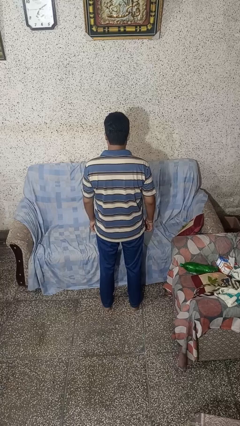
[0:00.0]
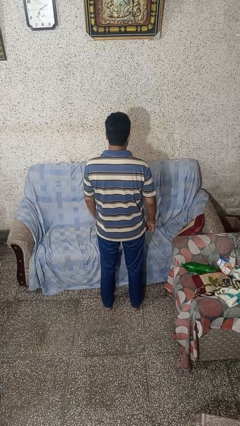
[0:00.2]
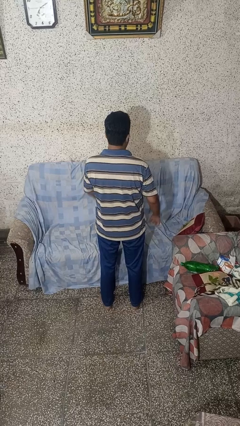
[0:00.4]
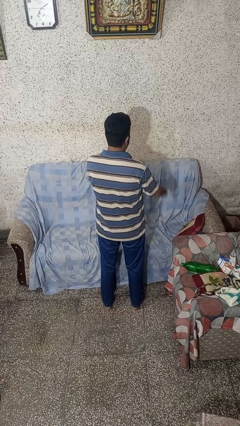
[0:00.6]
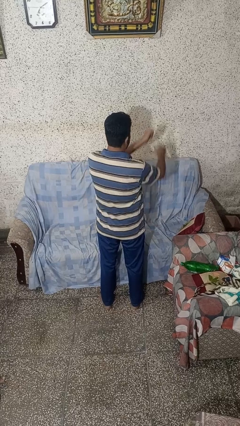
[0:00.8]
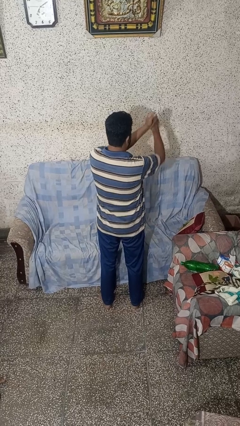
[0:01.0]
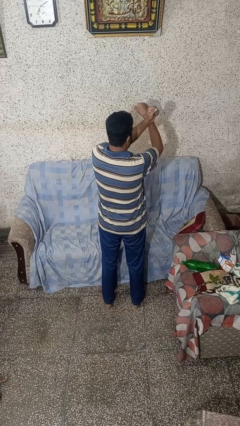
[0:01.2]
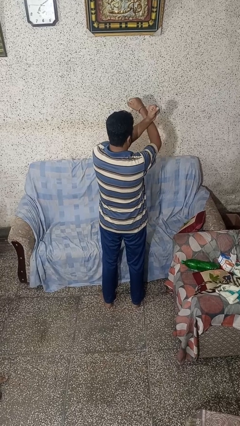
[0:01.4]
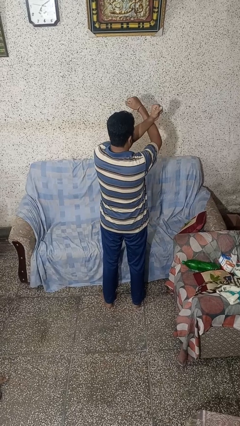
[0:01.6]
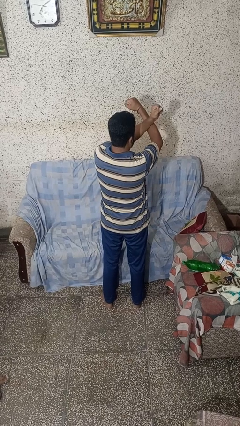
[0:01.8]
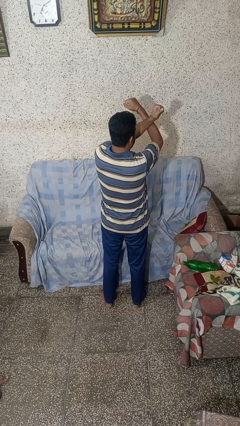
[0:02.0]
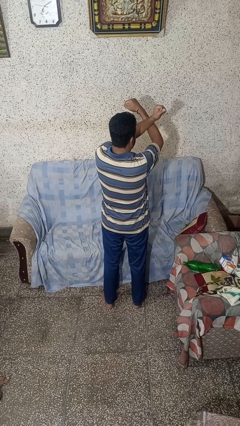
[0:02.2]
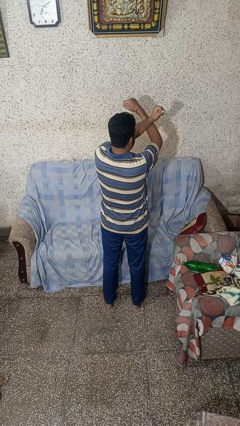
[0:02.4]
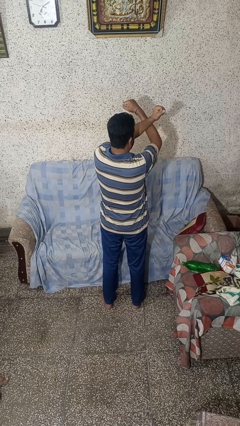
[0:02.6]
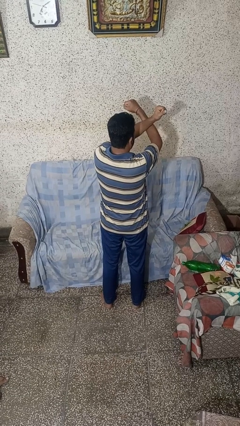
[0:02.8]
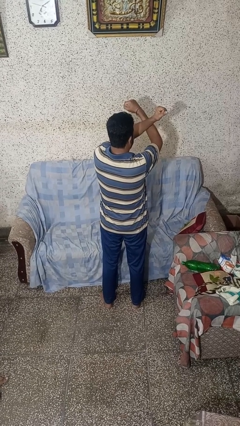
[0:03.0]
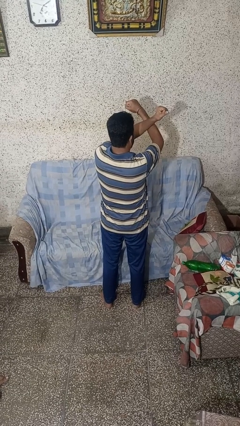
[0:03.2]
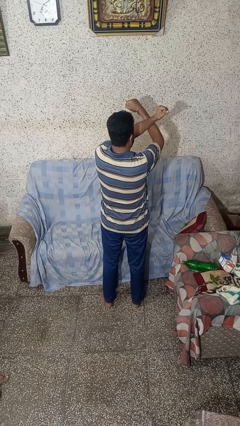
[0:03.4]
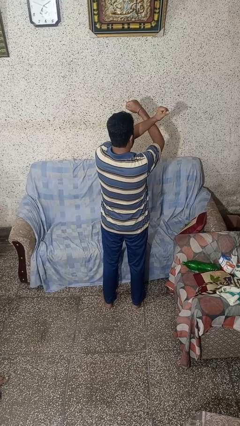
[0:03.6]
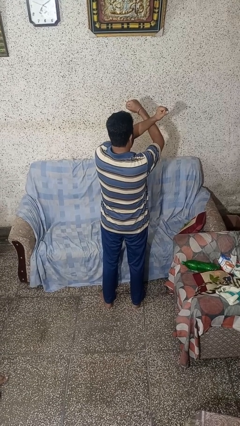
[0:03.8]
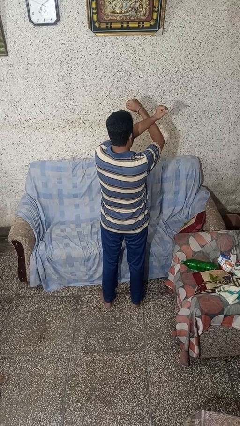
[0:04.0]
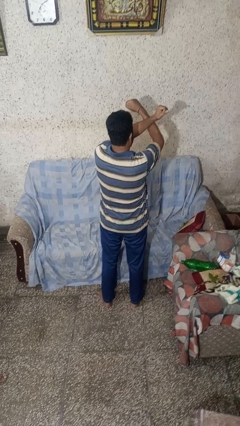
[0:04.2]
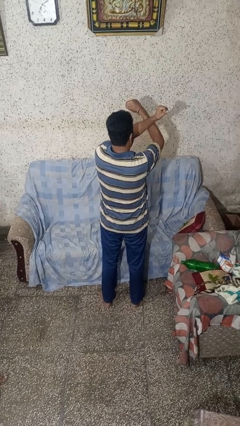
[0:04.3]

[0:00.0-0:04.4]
person gestures arms x

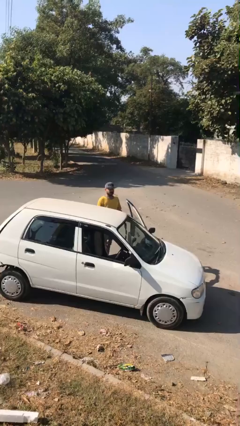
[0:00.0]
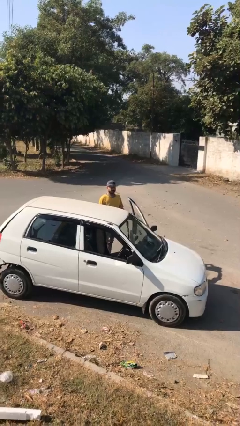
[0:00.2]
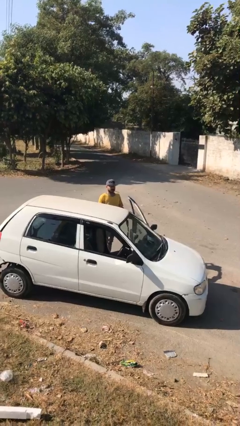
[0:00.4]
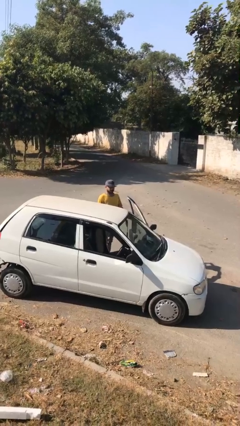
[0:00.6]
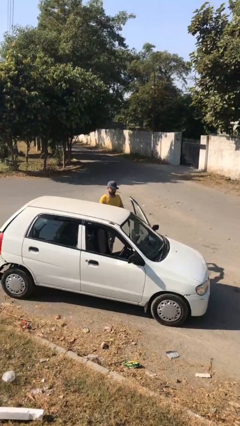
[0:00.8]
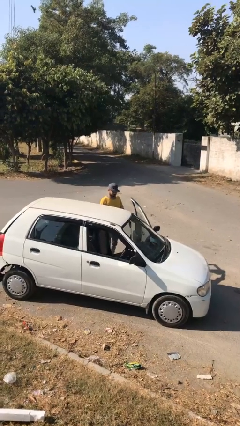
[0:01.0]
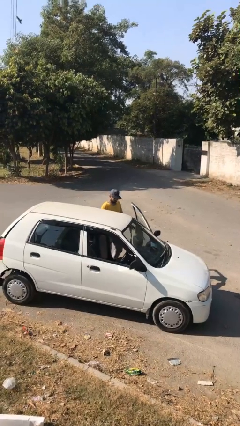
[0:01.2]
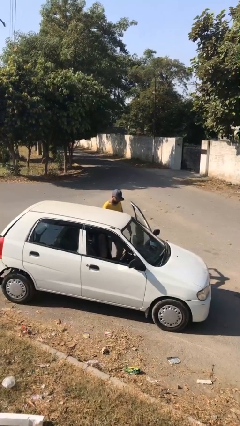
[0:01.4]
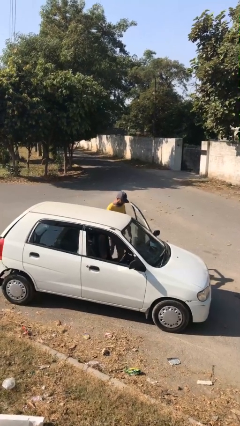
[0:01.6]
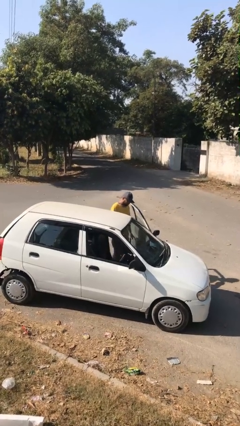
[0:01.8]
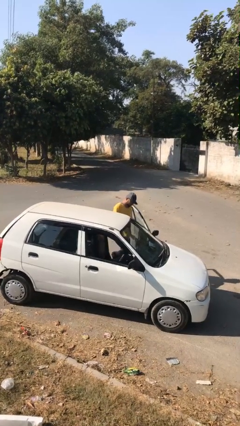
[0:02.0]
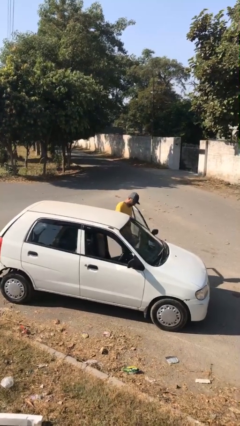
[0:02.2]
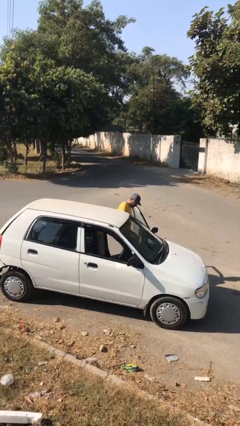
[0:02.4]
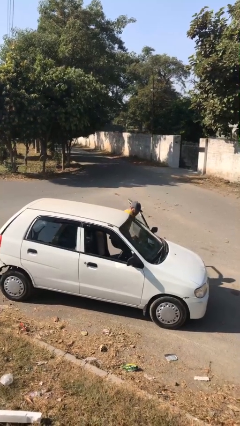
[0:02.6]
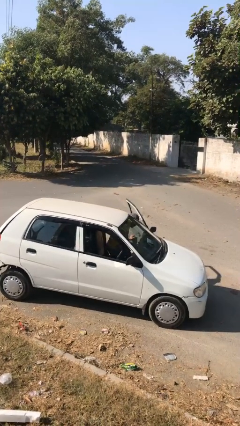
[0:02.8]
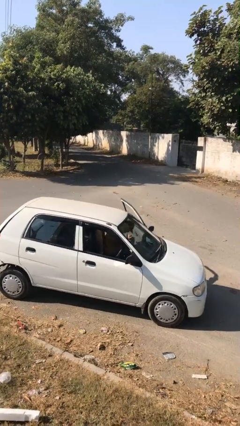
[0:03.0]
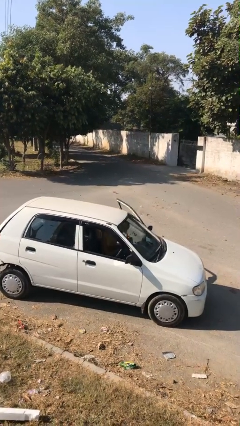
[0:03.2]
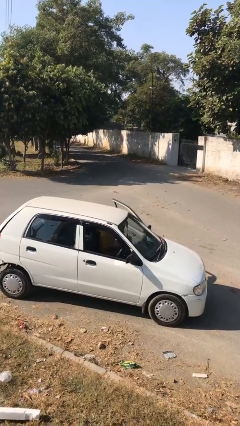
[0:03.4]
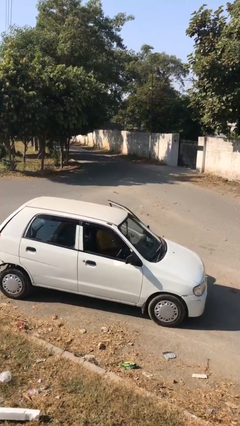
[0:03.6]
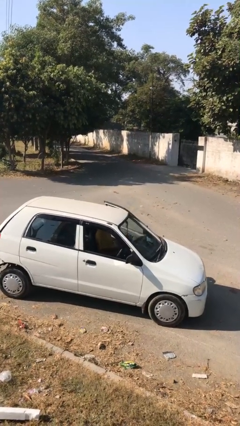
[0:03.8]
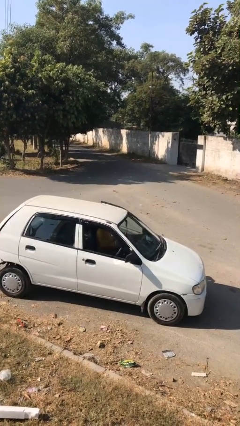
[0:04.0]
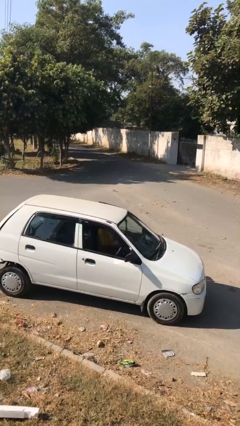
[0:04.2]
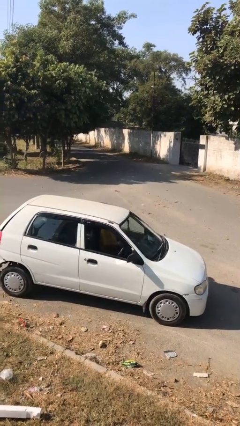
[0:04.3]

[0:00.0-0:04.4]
person enters car

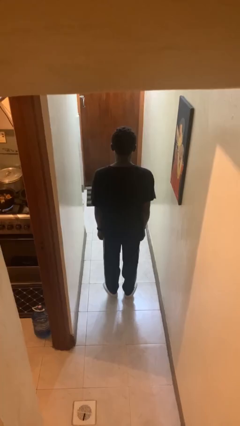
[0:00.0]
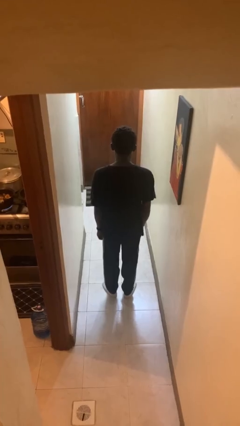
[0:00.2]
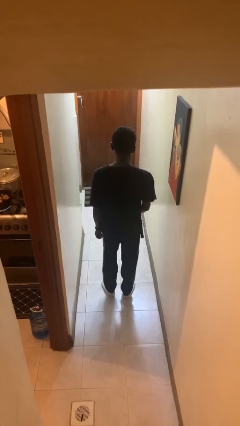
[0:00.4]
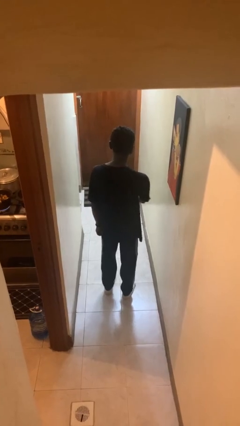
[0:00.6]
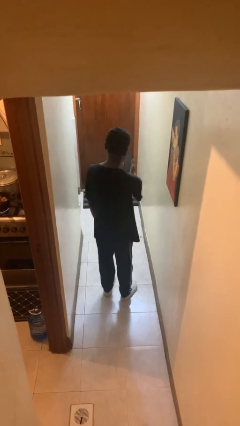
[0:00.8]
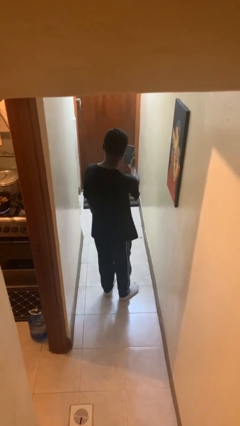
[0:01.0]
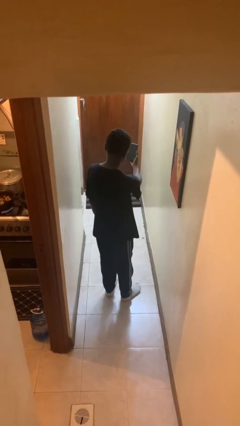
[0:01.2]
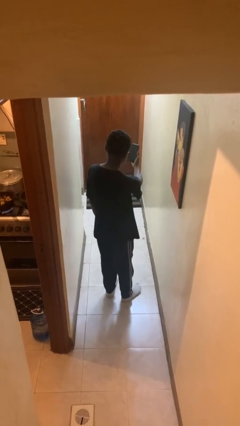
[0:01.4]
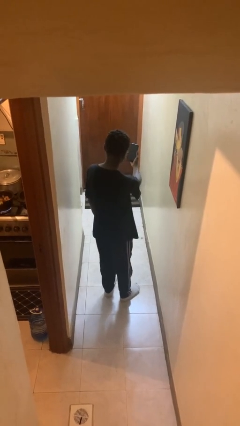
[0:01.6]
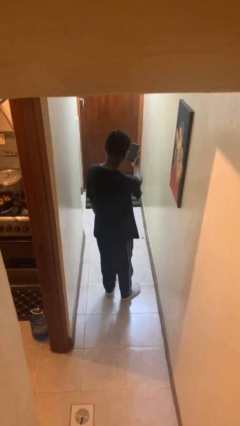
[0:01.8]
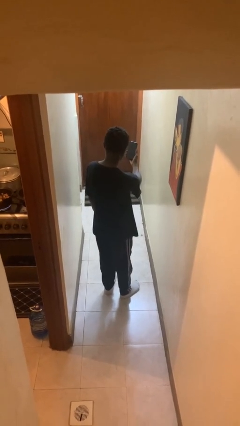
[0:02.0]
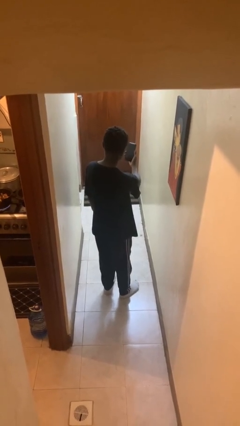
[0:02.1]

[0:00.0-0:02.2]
person takes selfie

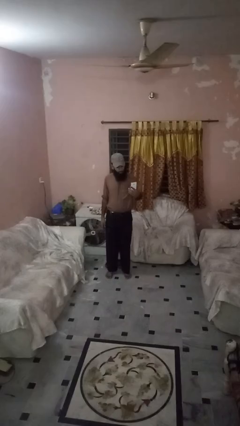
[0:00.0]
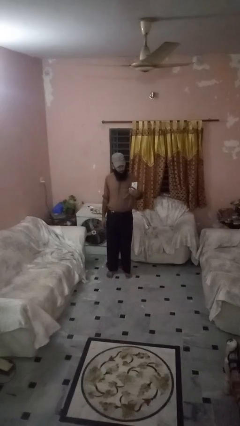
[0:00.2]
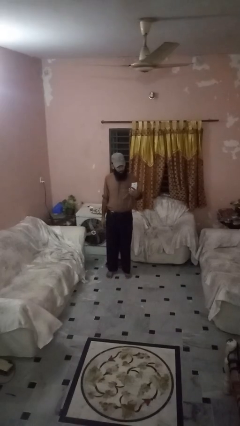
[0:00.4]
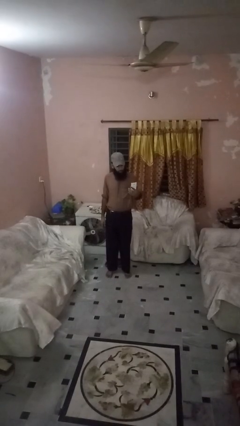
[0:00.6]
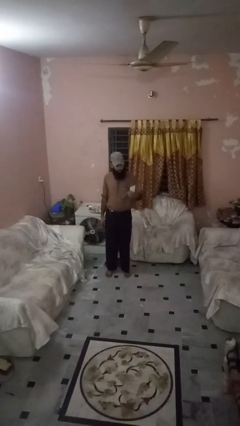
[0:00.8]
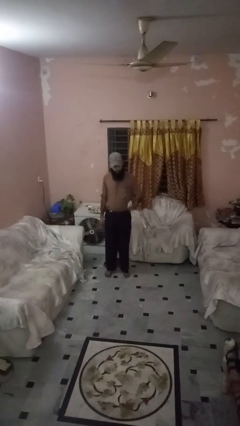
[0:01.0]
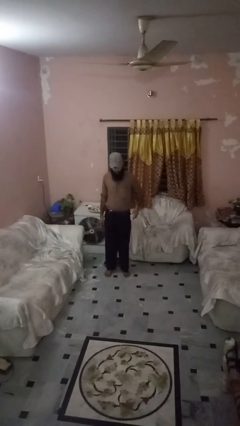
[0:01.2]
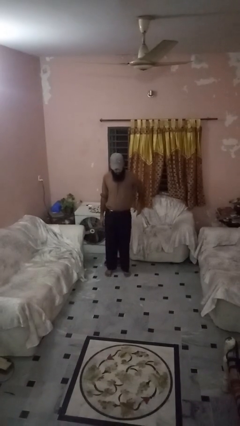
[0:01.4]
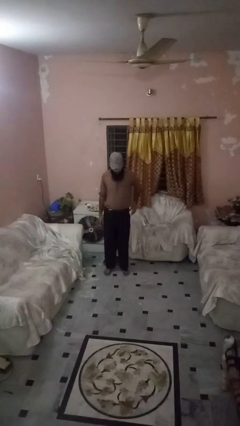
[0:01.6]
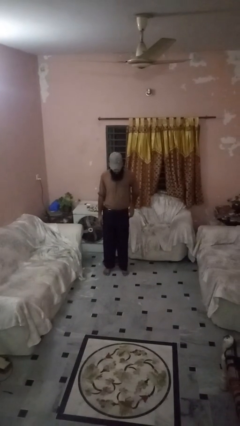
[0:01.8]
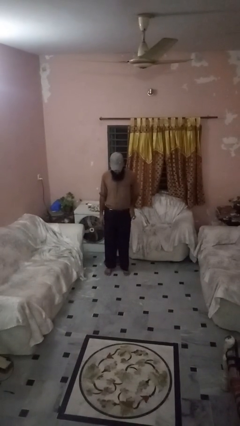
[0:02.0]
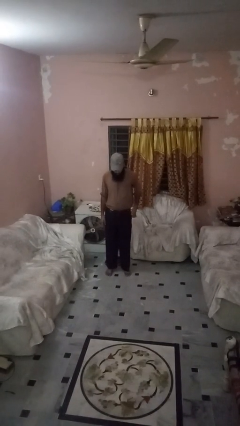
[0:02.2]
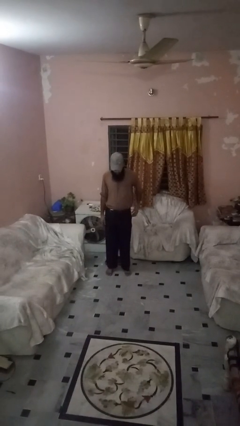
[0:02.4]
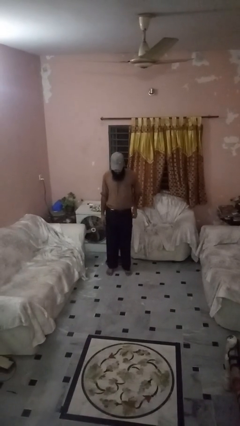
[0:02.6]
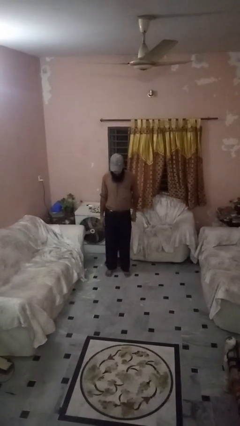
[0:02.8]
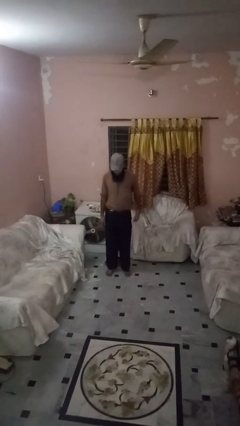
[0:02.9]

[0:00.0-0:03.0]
person puts phone into pocket

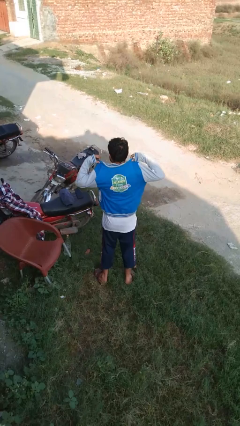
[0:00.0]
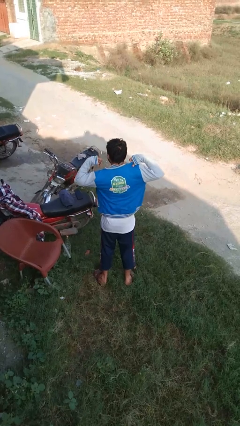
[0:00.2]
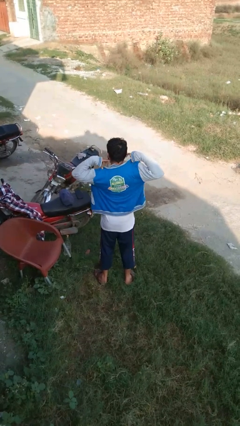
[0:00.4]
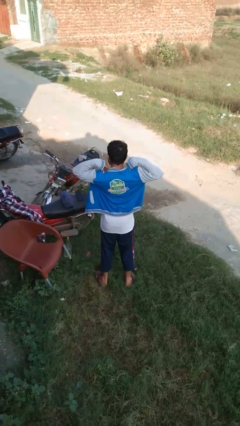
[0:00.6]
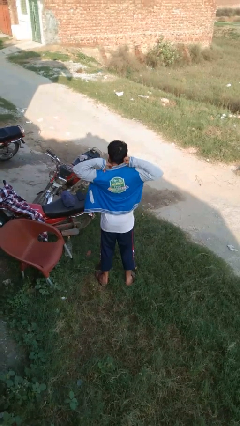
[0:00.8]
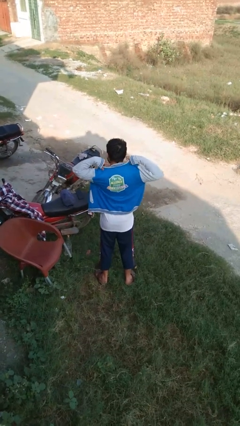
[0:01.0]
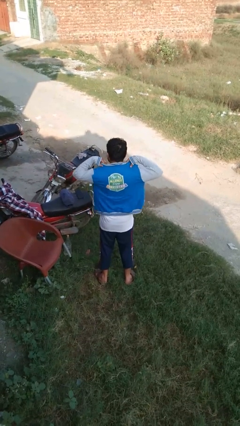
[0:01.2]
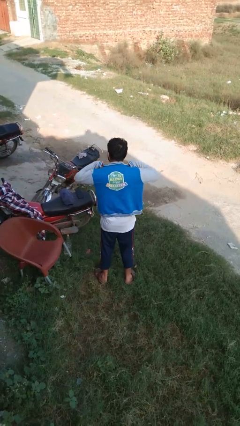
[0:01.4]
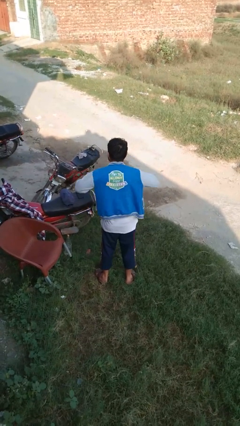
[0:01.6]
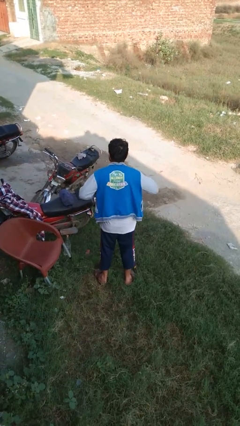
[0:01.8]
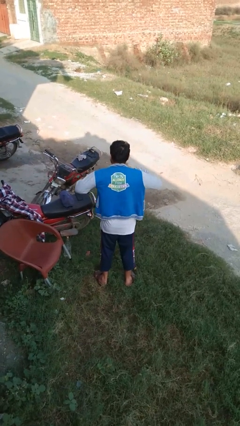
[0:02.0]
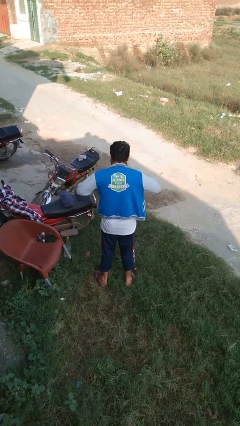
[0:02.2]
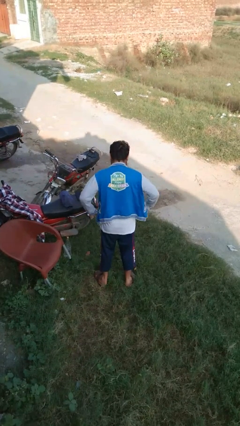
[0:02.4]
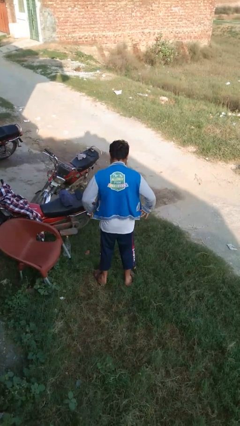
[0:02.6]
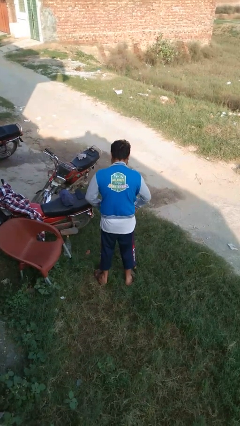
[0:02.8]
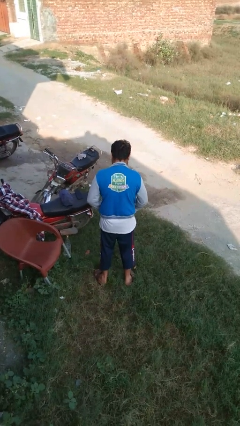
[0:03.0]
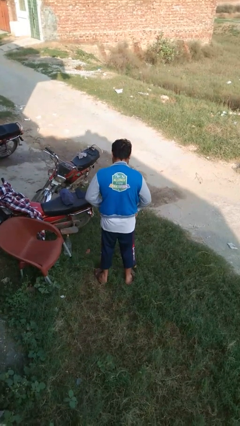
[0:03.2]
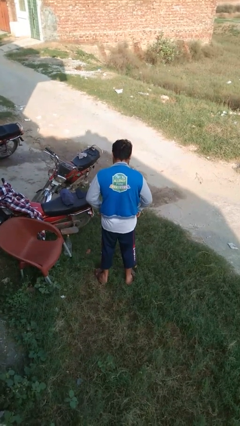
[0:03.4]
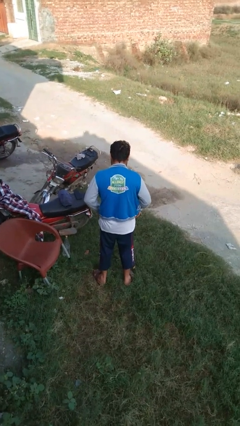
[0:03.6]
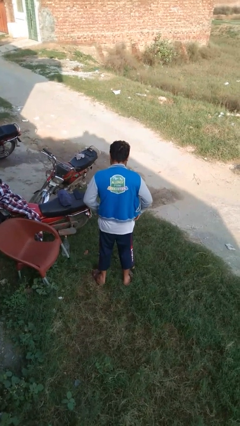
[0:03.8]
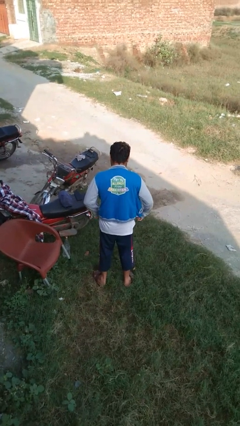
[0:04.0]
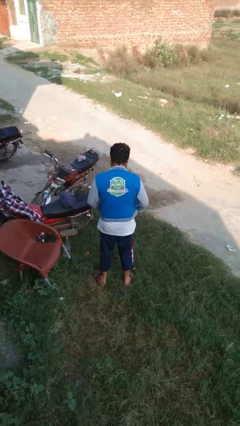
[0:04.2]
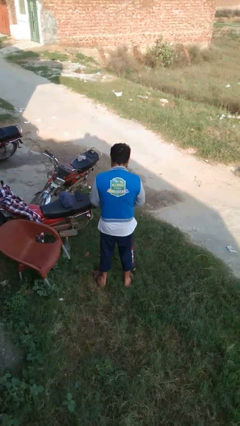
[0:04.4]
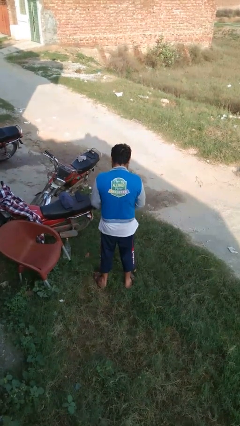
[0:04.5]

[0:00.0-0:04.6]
person zips up jacket
